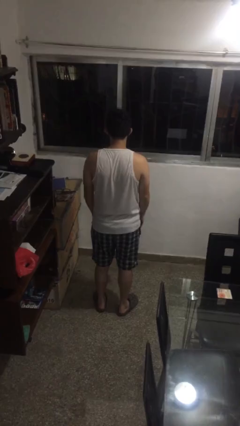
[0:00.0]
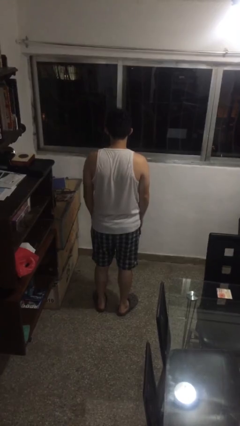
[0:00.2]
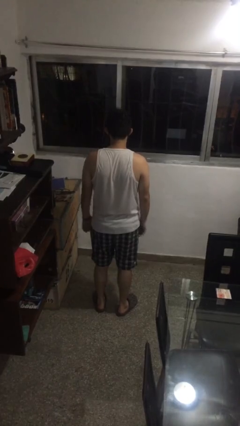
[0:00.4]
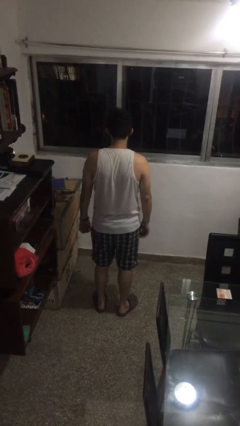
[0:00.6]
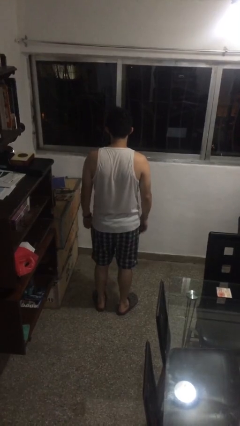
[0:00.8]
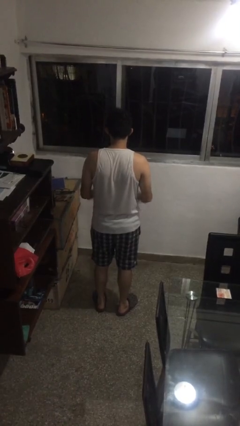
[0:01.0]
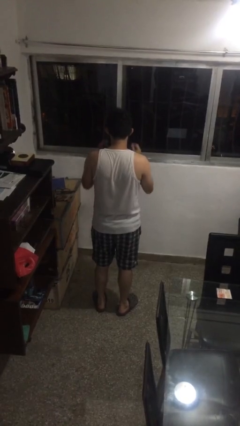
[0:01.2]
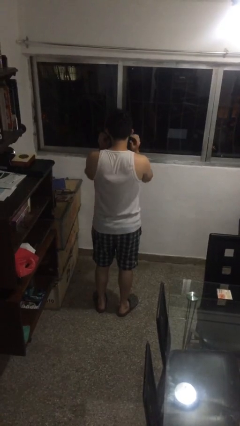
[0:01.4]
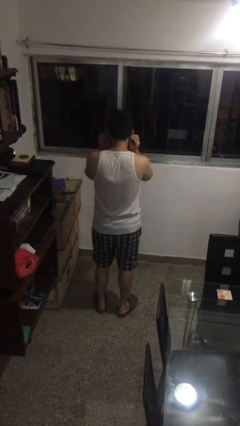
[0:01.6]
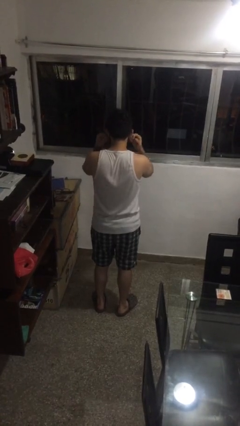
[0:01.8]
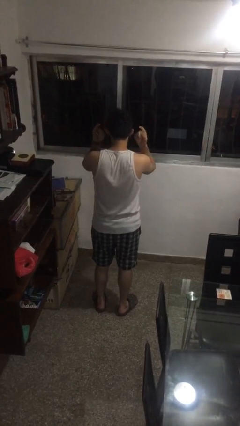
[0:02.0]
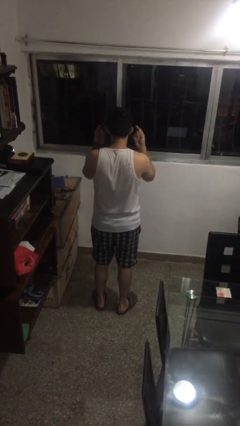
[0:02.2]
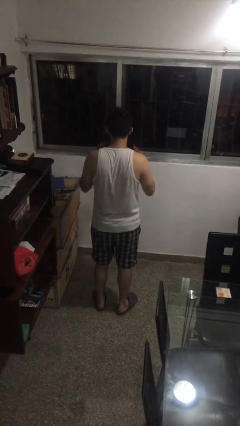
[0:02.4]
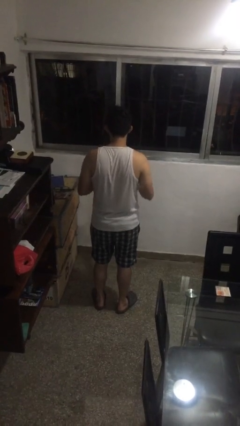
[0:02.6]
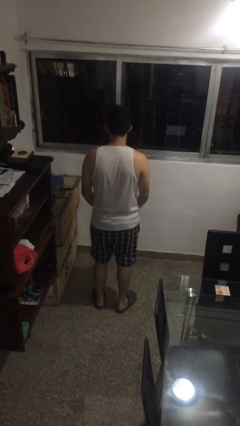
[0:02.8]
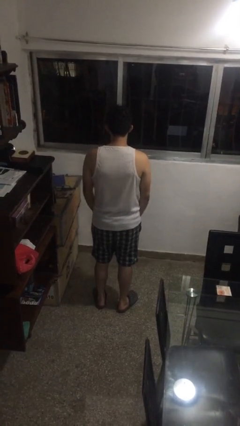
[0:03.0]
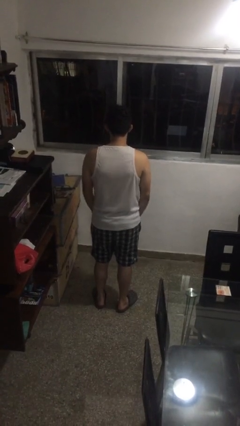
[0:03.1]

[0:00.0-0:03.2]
person takes off facemask

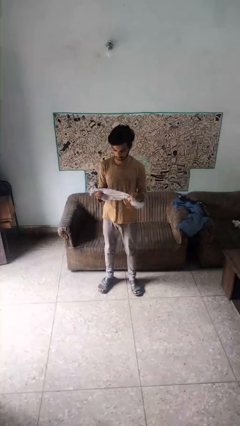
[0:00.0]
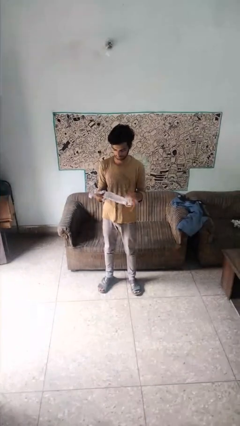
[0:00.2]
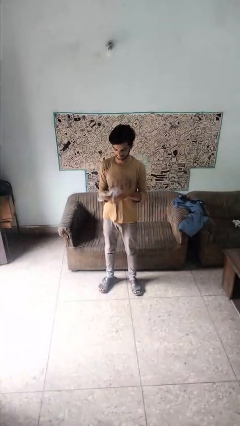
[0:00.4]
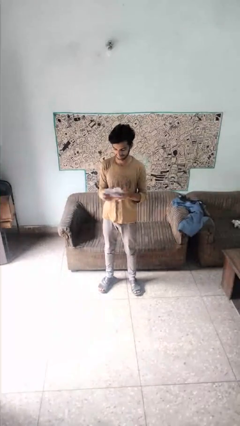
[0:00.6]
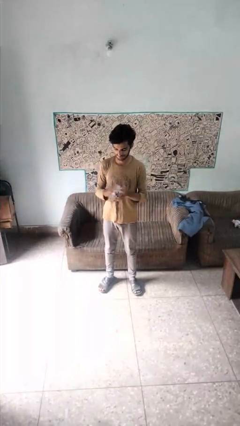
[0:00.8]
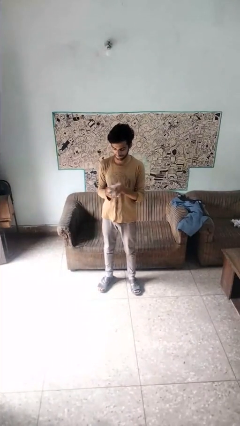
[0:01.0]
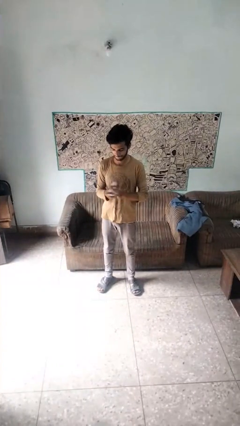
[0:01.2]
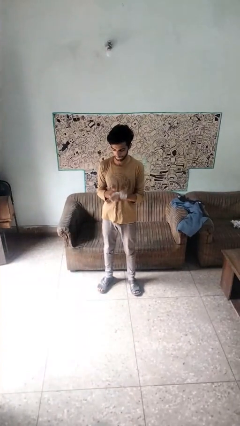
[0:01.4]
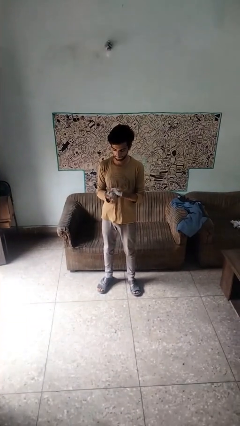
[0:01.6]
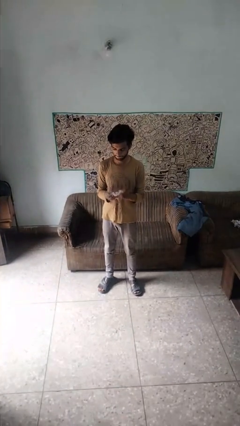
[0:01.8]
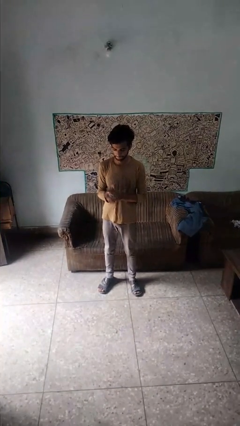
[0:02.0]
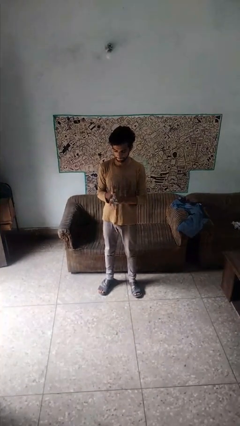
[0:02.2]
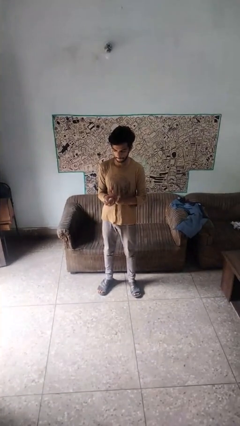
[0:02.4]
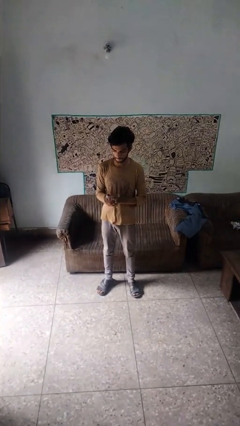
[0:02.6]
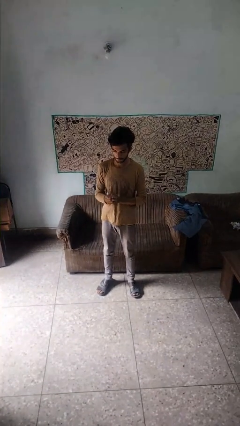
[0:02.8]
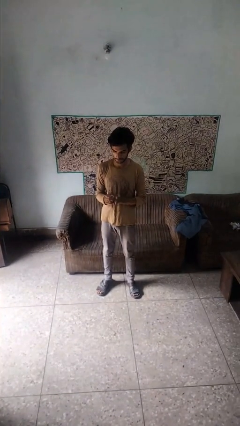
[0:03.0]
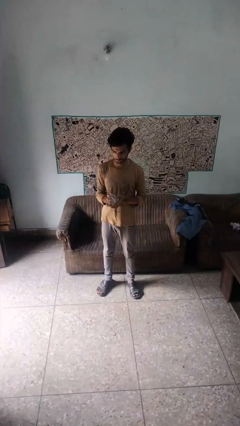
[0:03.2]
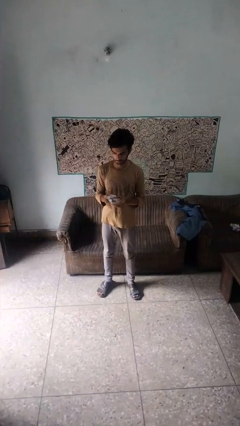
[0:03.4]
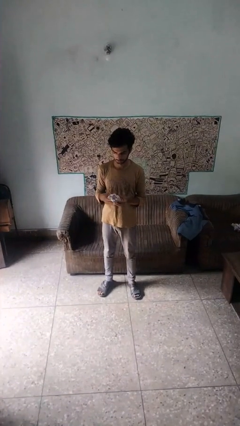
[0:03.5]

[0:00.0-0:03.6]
person crumples paper

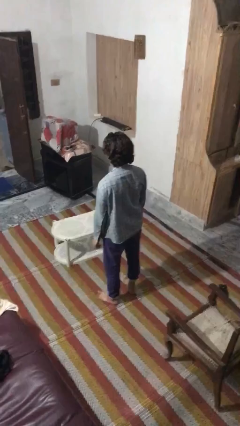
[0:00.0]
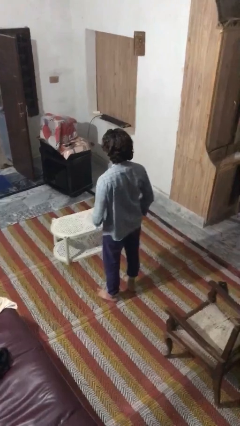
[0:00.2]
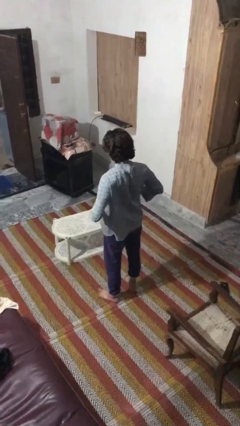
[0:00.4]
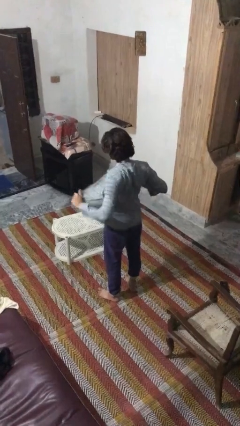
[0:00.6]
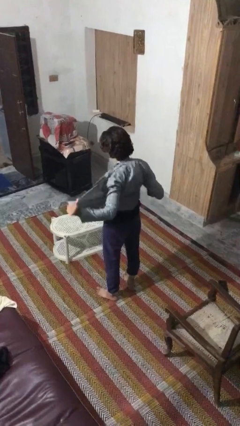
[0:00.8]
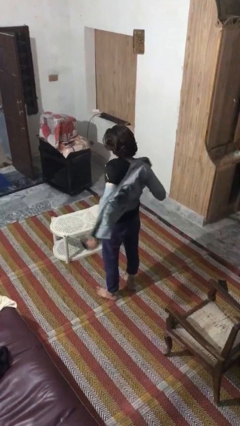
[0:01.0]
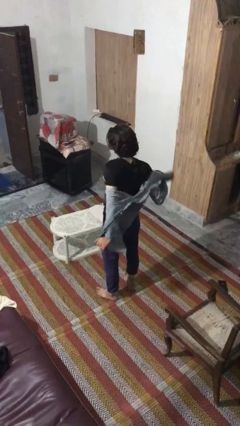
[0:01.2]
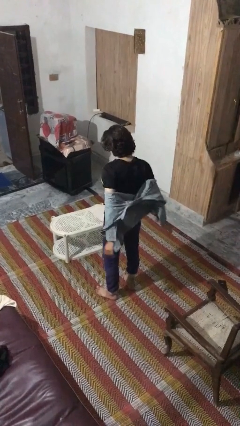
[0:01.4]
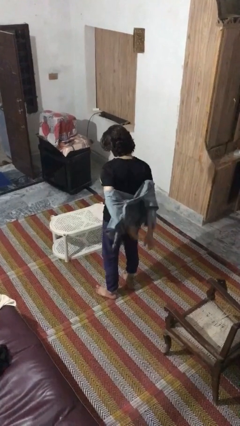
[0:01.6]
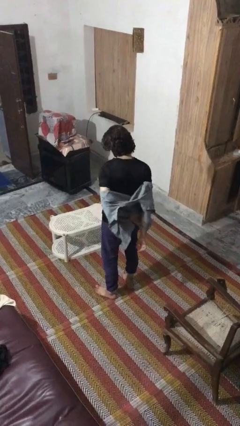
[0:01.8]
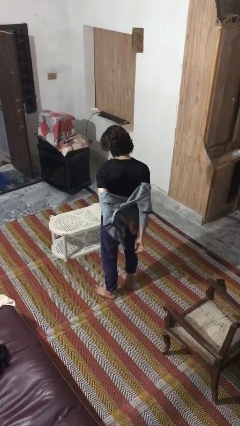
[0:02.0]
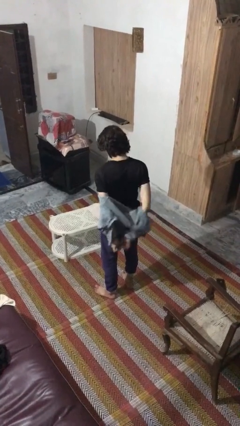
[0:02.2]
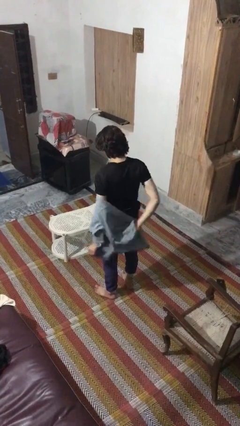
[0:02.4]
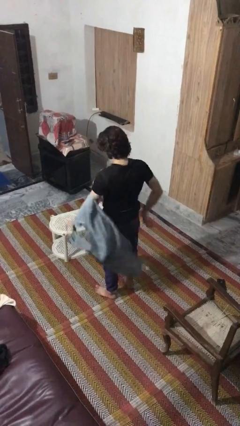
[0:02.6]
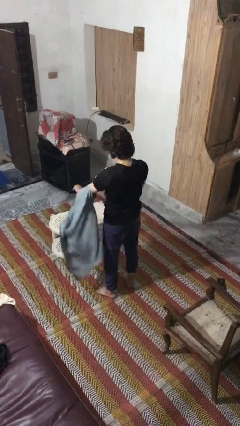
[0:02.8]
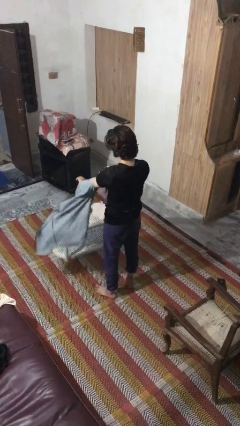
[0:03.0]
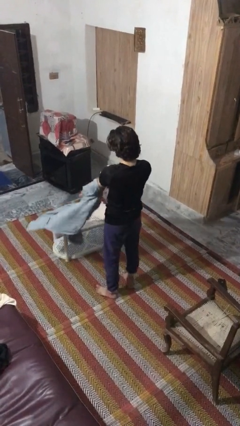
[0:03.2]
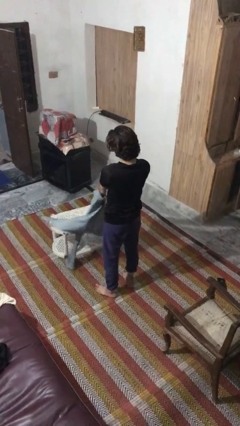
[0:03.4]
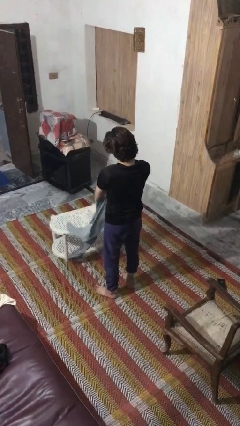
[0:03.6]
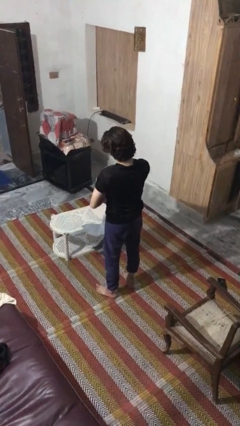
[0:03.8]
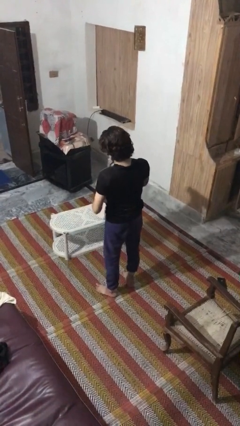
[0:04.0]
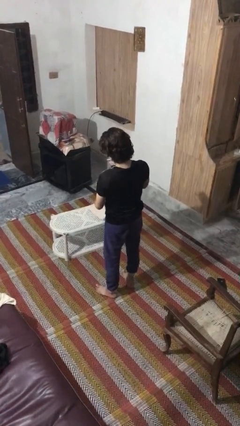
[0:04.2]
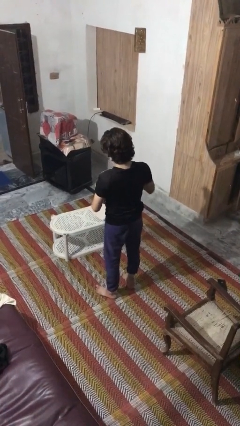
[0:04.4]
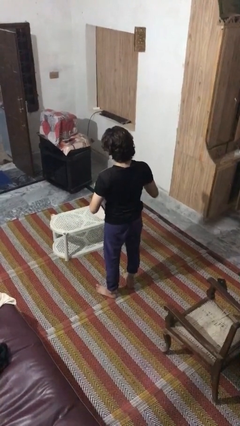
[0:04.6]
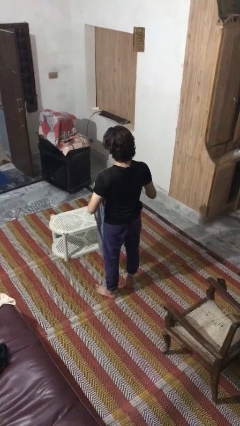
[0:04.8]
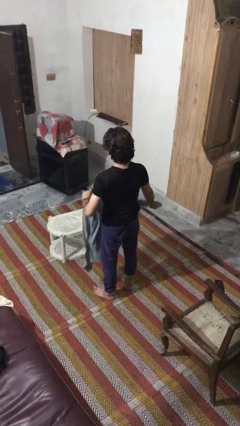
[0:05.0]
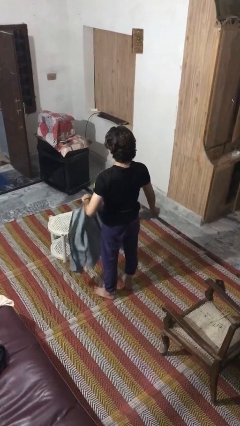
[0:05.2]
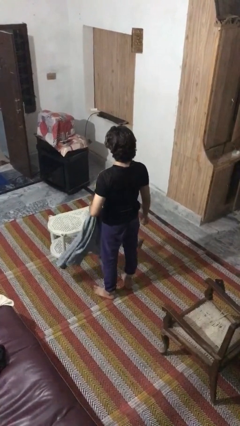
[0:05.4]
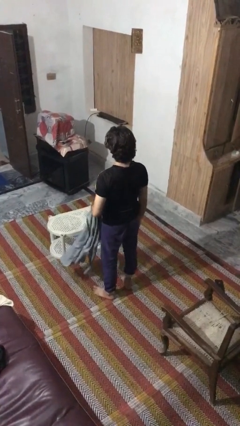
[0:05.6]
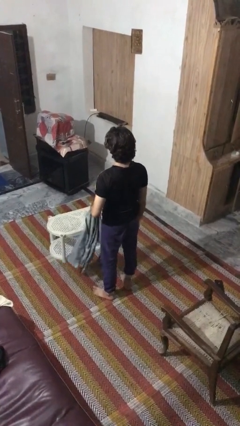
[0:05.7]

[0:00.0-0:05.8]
person takes off shirt

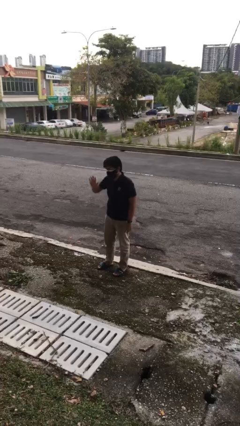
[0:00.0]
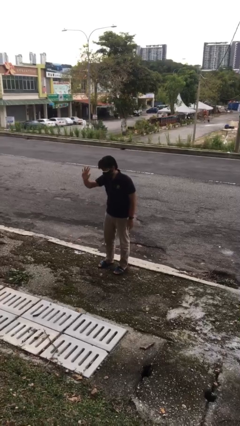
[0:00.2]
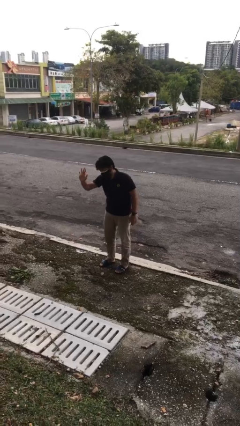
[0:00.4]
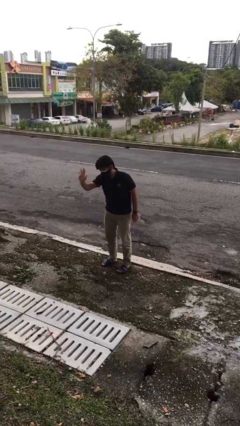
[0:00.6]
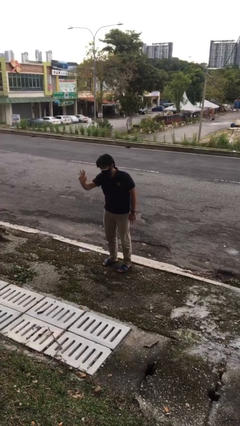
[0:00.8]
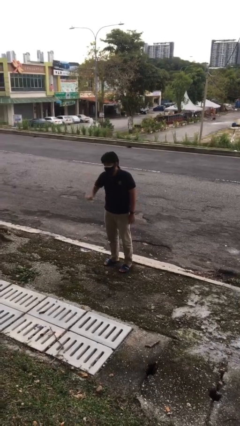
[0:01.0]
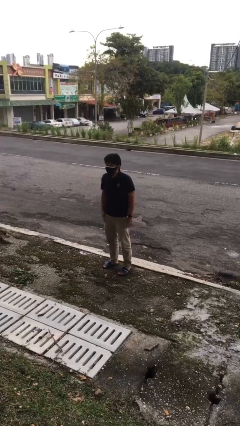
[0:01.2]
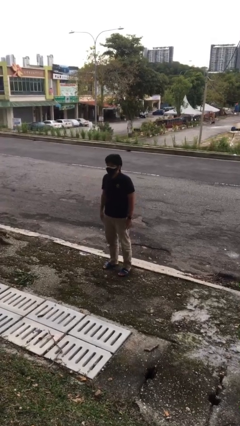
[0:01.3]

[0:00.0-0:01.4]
person gestures stop

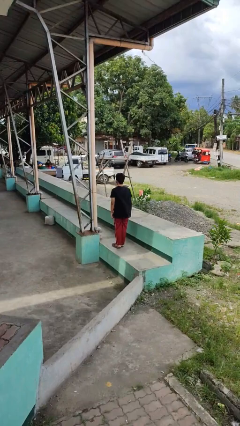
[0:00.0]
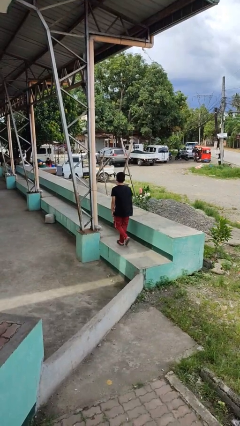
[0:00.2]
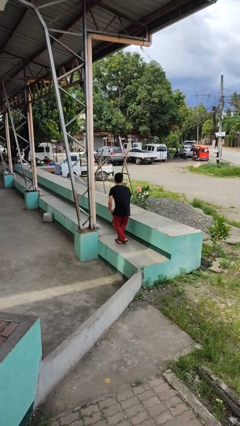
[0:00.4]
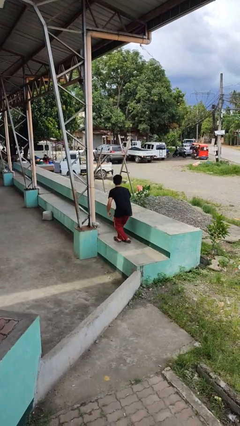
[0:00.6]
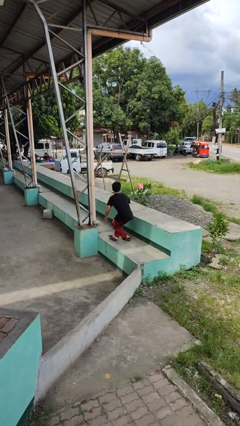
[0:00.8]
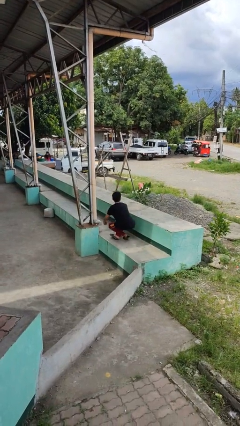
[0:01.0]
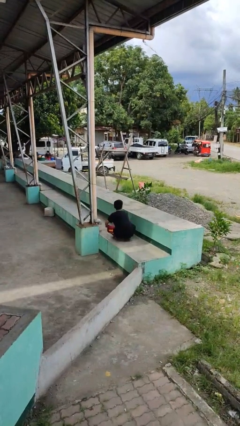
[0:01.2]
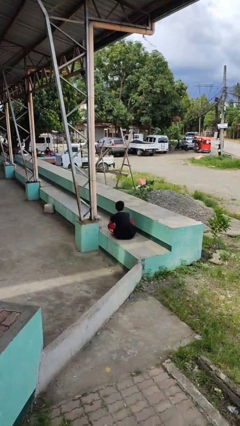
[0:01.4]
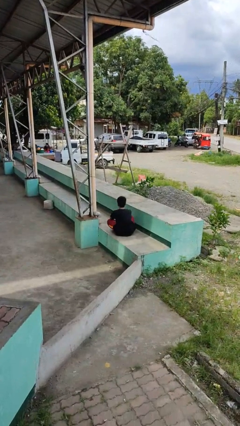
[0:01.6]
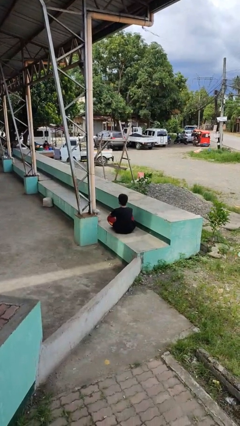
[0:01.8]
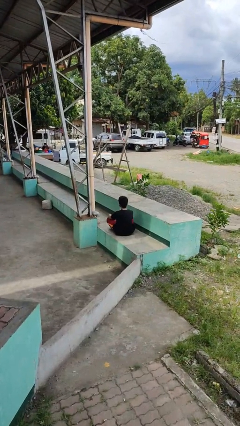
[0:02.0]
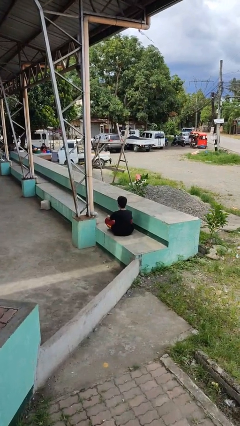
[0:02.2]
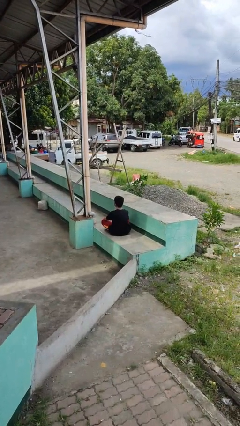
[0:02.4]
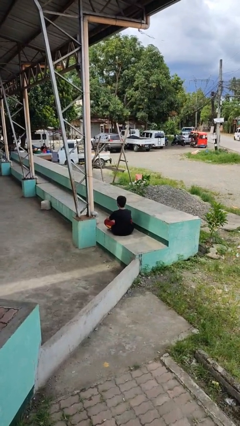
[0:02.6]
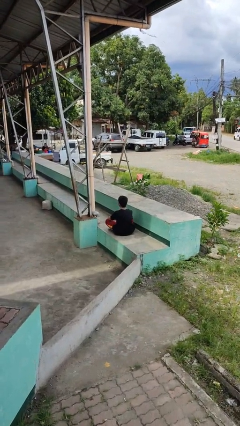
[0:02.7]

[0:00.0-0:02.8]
person sits crisscross

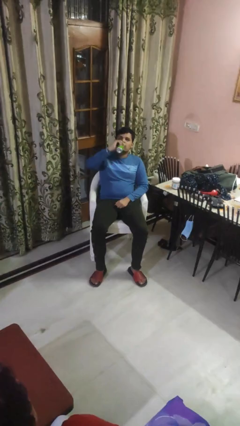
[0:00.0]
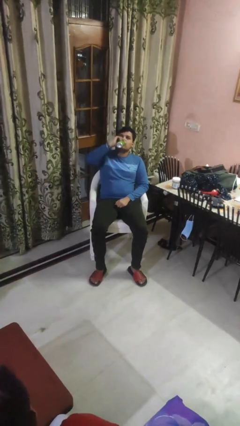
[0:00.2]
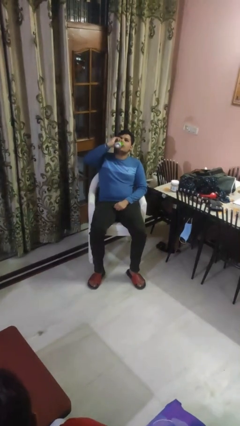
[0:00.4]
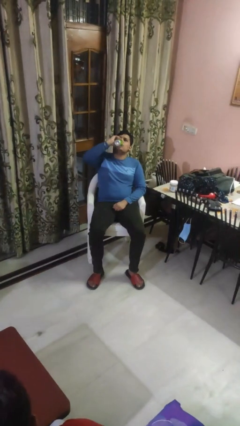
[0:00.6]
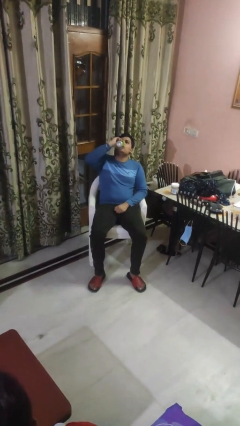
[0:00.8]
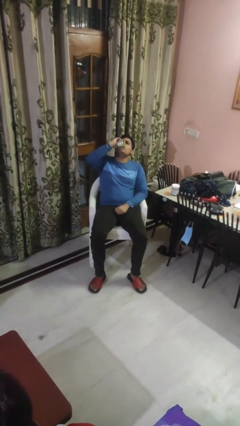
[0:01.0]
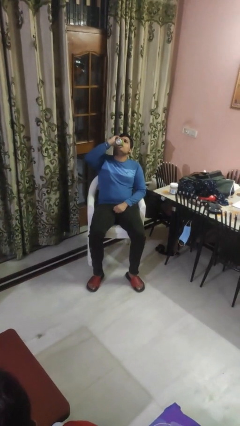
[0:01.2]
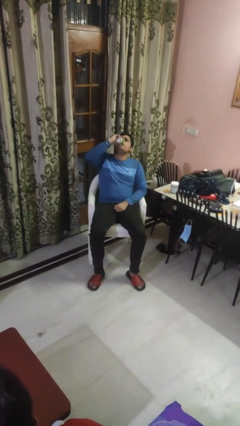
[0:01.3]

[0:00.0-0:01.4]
person drinks from beverage can
